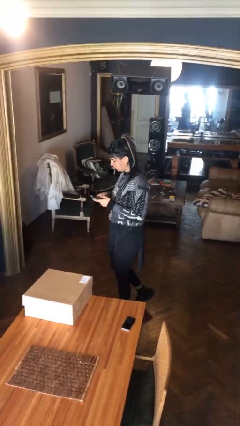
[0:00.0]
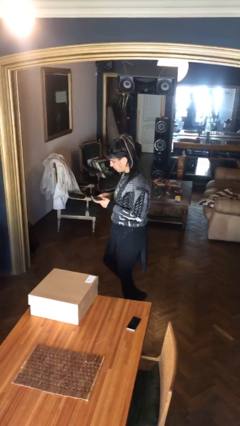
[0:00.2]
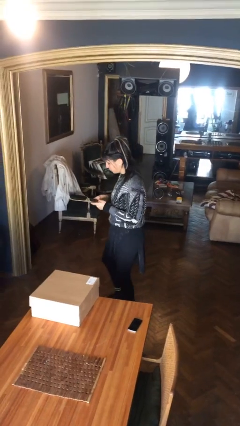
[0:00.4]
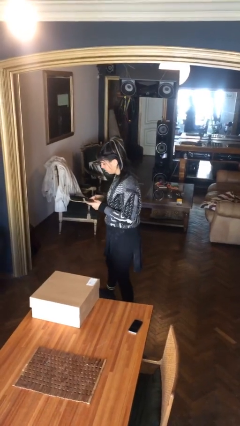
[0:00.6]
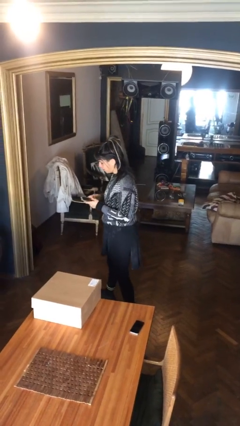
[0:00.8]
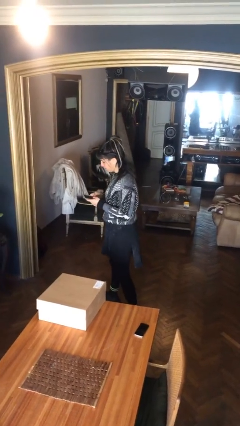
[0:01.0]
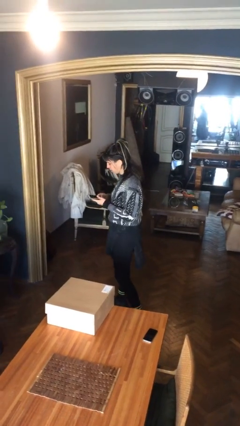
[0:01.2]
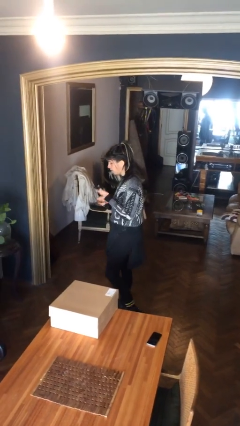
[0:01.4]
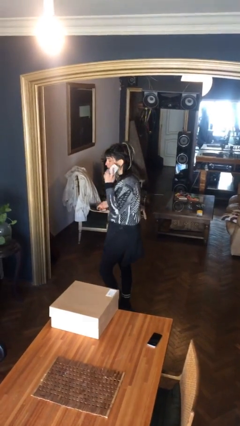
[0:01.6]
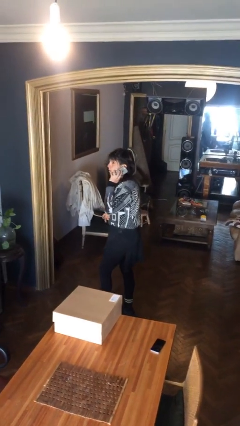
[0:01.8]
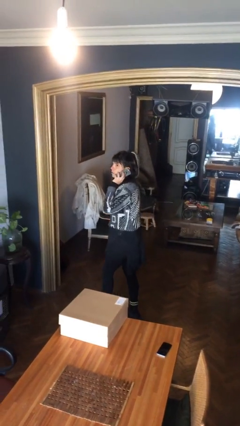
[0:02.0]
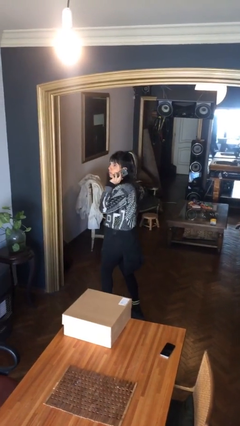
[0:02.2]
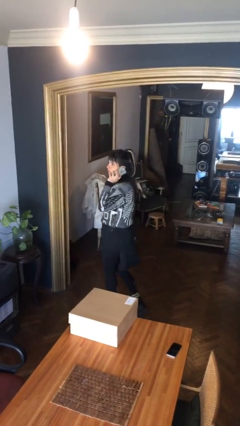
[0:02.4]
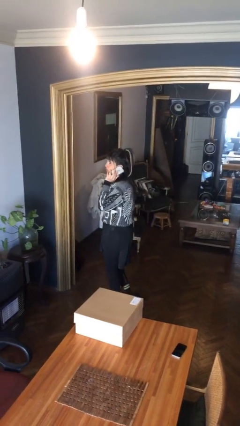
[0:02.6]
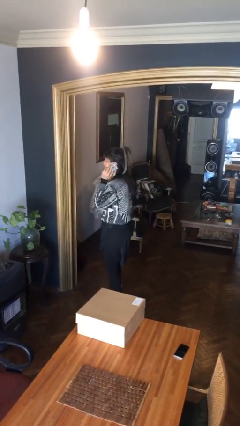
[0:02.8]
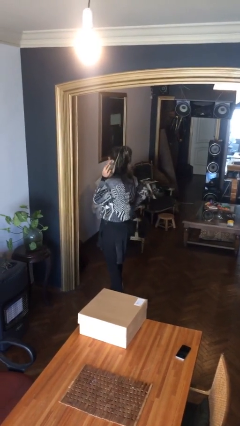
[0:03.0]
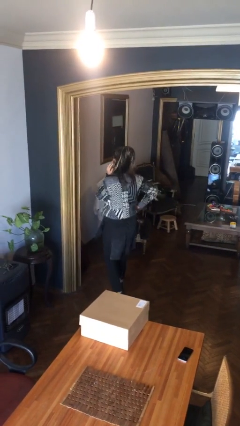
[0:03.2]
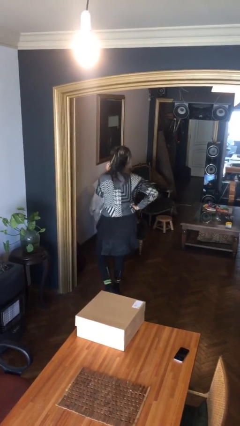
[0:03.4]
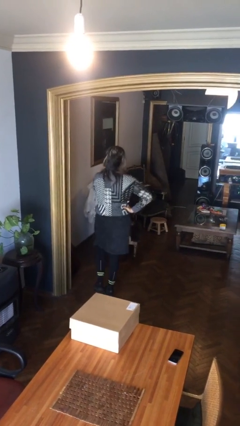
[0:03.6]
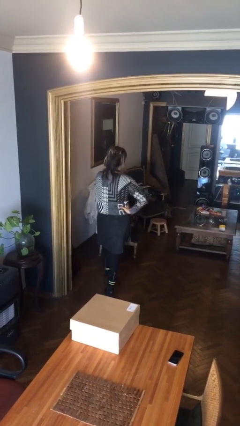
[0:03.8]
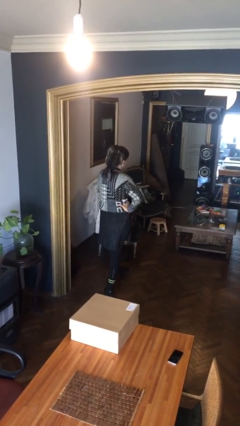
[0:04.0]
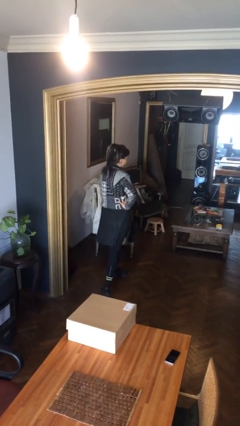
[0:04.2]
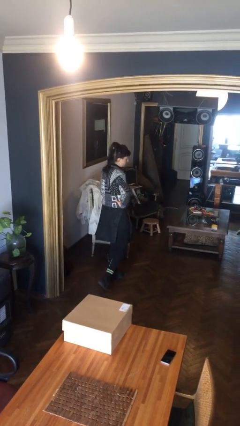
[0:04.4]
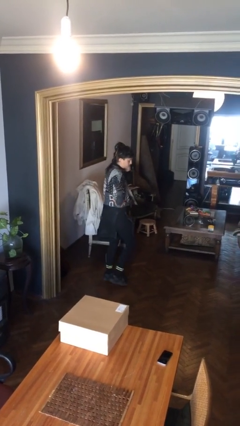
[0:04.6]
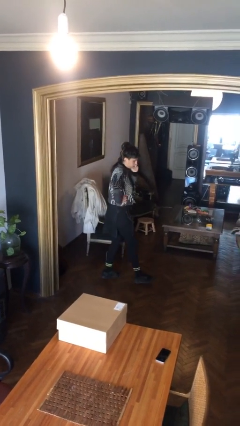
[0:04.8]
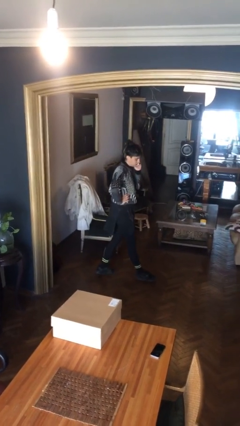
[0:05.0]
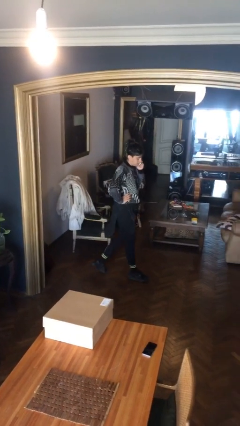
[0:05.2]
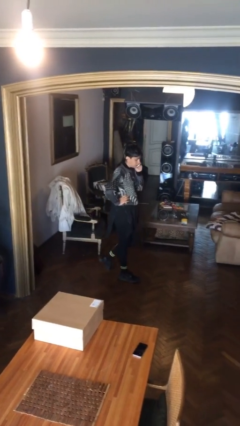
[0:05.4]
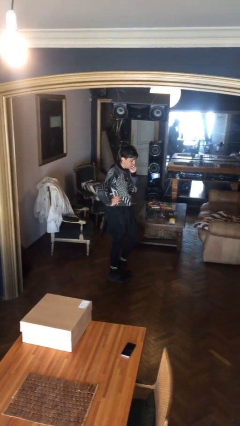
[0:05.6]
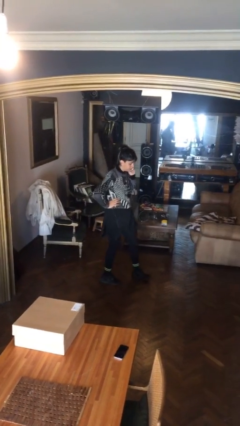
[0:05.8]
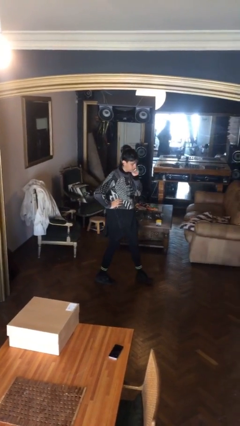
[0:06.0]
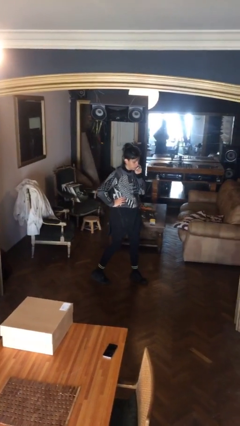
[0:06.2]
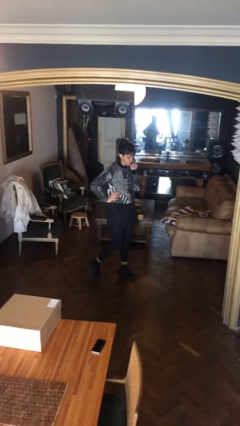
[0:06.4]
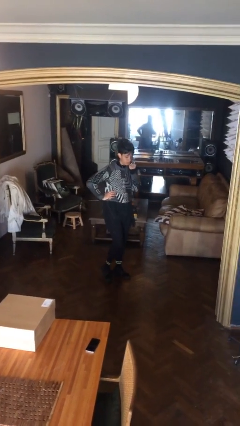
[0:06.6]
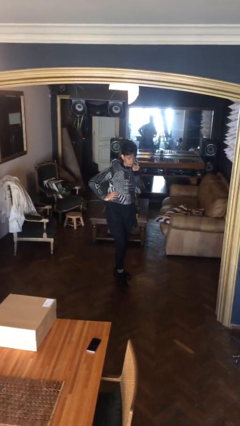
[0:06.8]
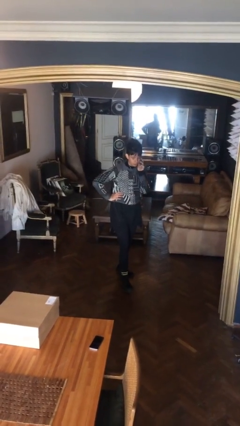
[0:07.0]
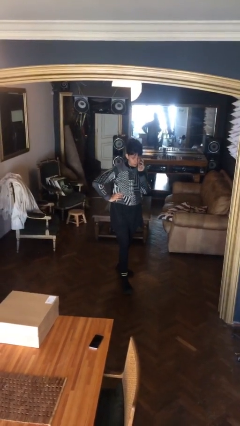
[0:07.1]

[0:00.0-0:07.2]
person talks on phone

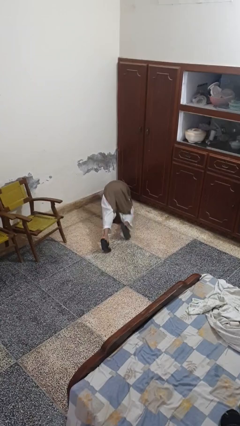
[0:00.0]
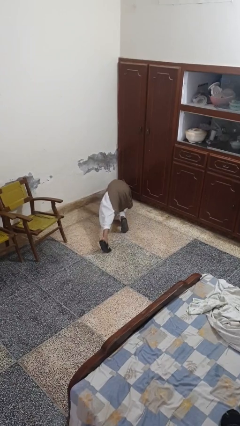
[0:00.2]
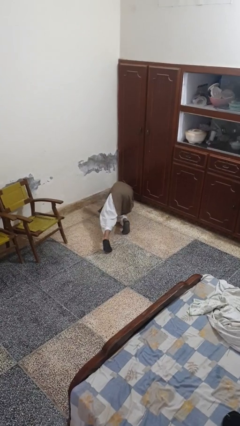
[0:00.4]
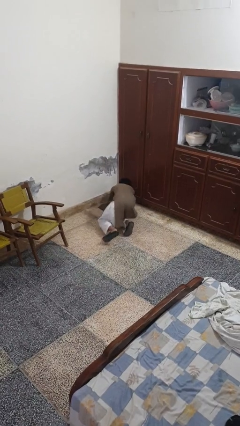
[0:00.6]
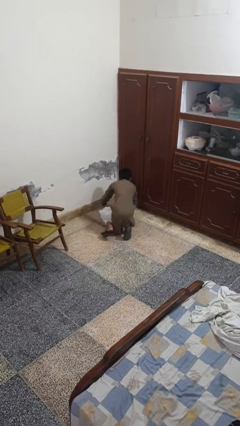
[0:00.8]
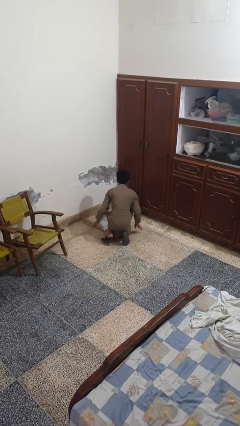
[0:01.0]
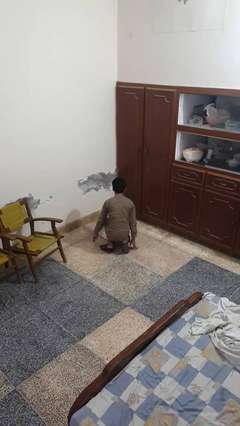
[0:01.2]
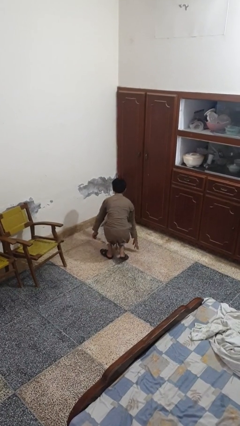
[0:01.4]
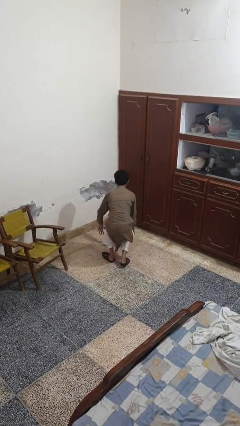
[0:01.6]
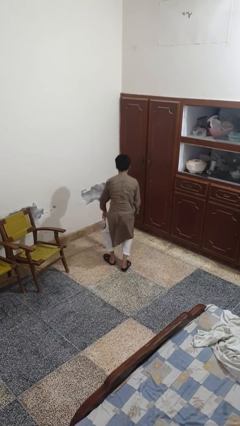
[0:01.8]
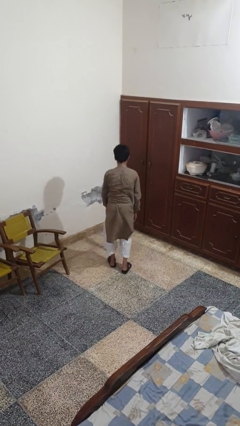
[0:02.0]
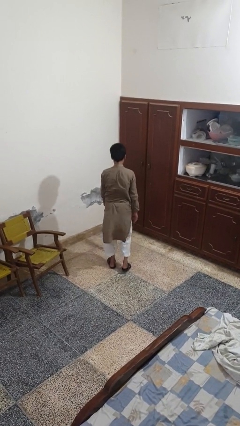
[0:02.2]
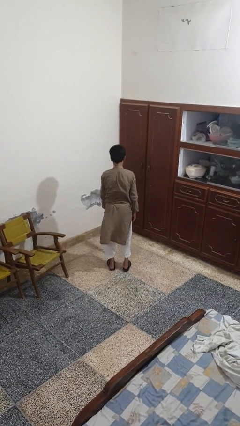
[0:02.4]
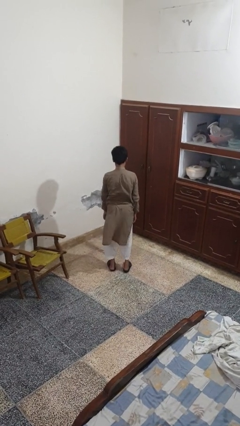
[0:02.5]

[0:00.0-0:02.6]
person stands up from floor

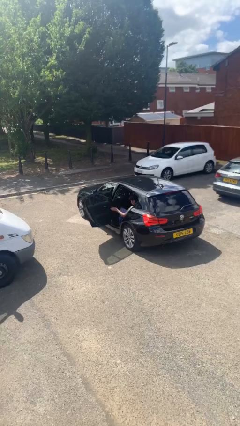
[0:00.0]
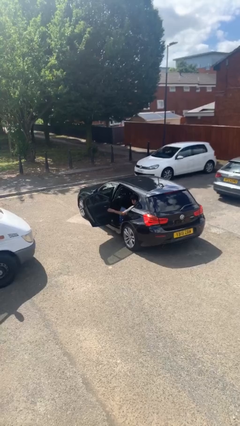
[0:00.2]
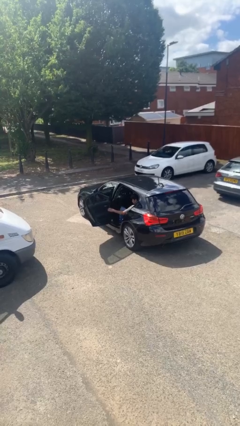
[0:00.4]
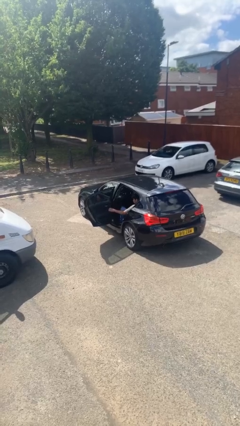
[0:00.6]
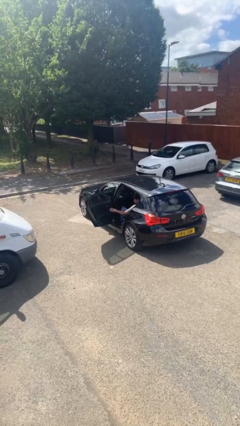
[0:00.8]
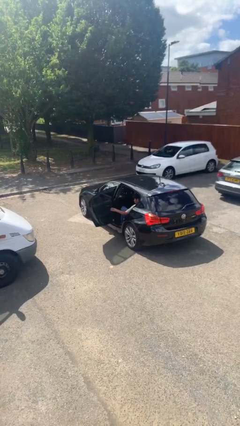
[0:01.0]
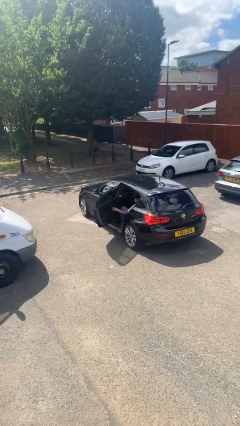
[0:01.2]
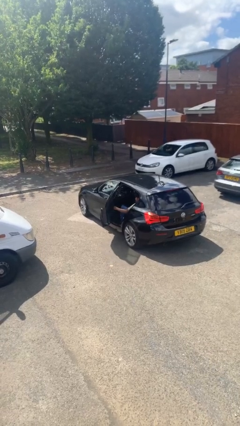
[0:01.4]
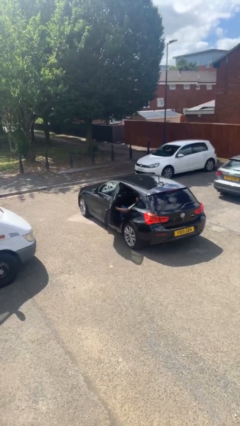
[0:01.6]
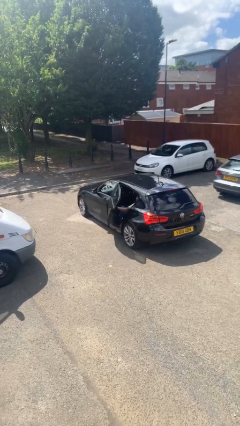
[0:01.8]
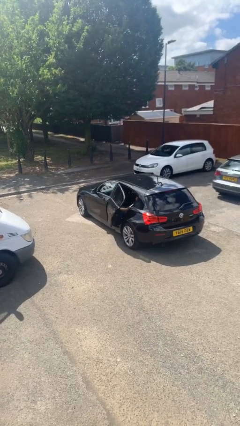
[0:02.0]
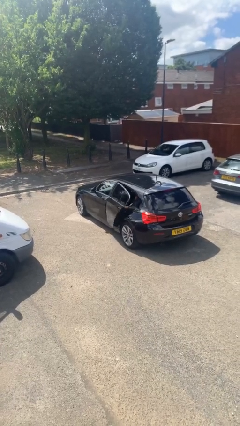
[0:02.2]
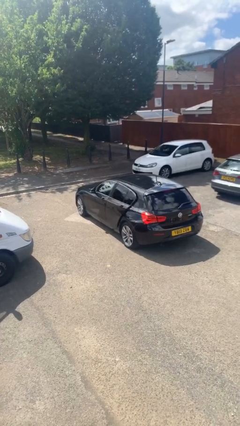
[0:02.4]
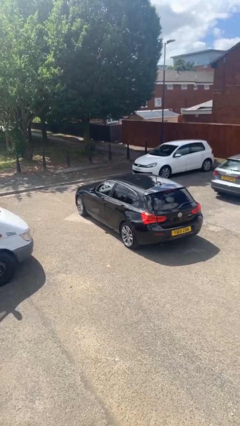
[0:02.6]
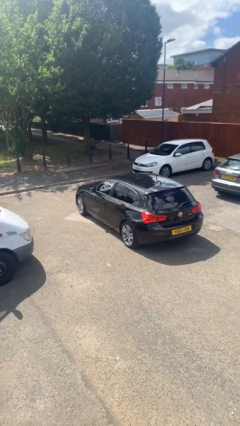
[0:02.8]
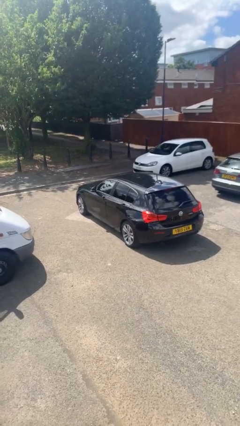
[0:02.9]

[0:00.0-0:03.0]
person closes car door

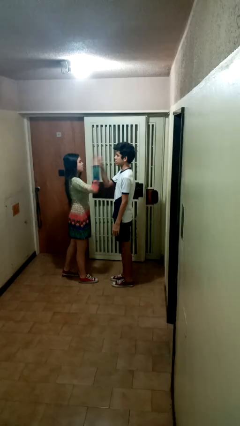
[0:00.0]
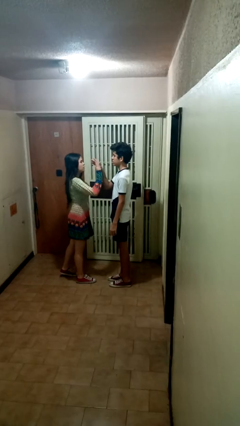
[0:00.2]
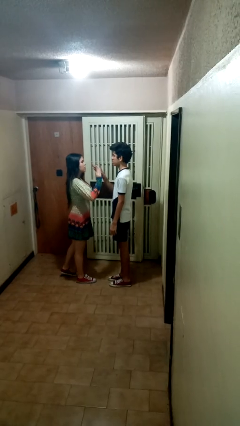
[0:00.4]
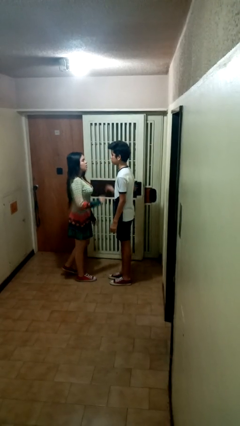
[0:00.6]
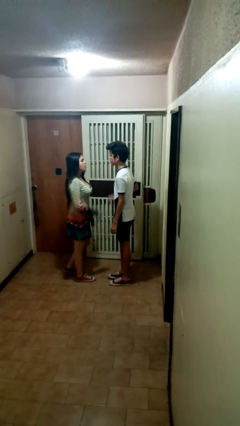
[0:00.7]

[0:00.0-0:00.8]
person highfives hand

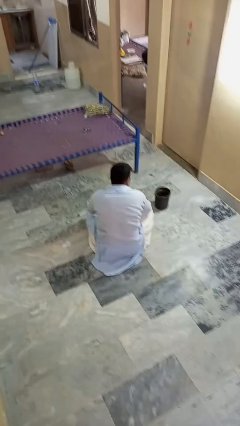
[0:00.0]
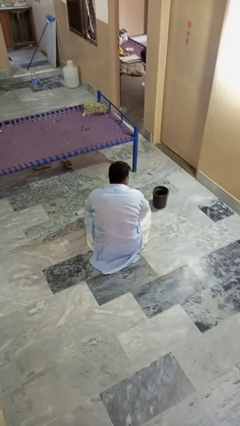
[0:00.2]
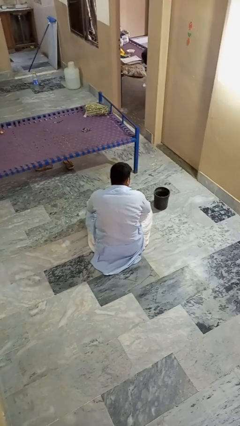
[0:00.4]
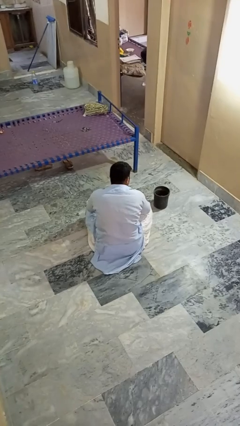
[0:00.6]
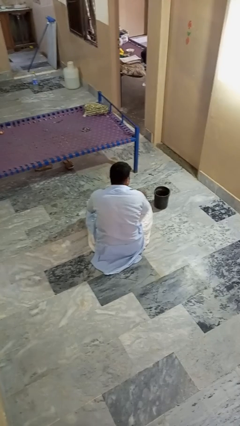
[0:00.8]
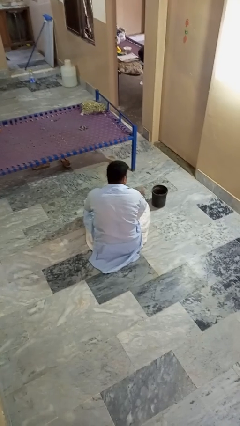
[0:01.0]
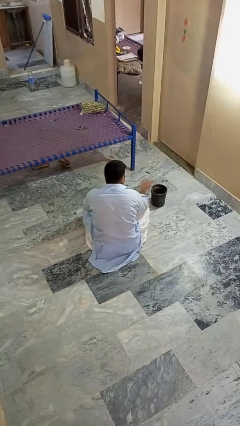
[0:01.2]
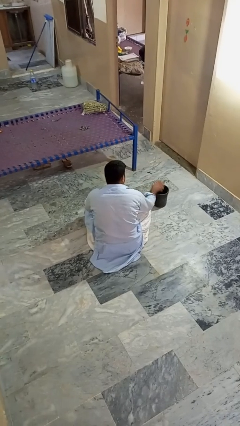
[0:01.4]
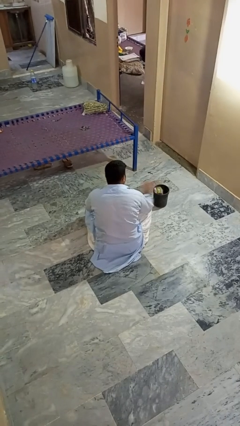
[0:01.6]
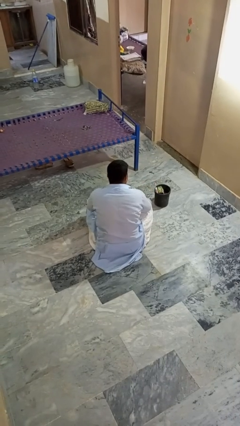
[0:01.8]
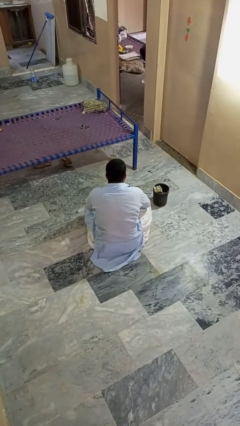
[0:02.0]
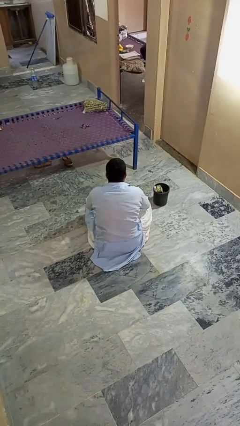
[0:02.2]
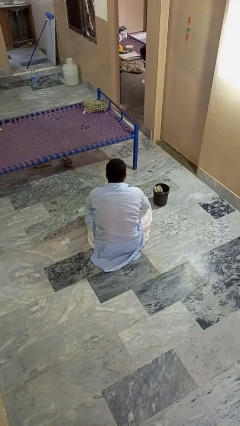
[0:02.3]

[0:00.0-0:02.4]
person puts object into basket

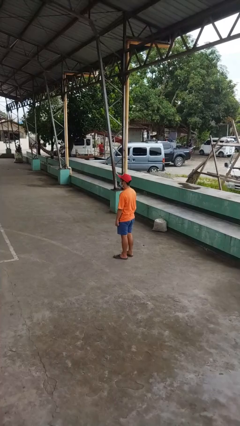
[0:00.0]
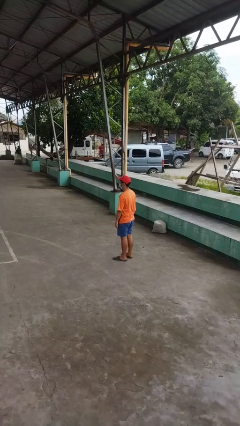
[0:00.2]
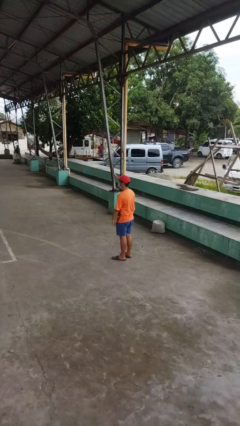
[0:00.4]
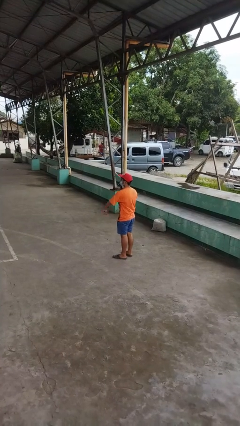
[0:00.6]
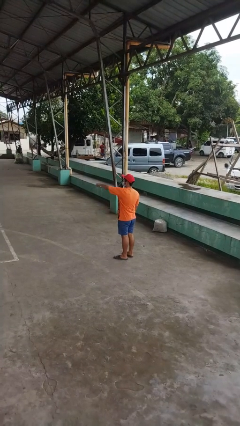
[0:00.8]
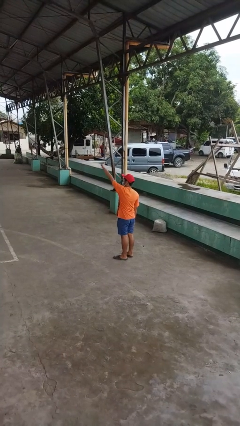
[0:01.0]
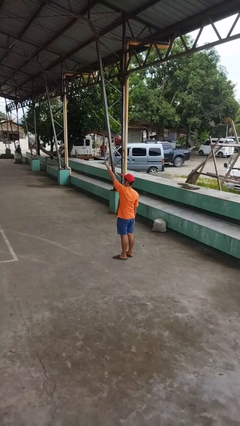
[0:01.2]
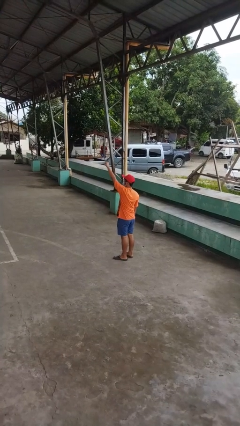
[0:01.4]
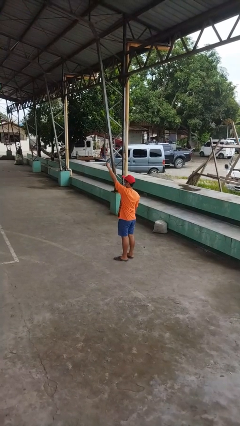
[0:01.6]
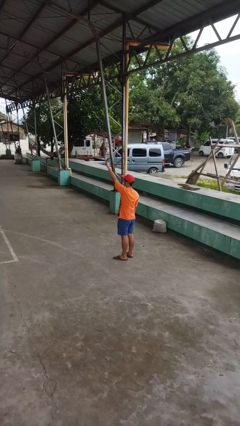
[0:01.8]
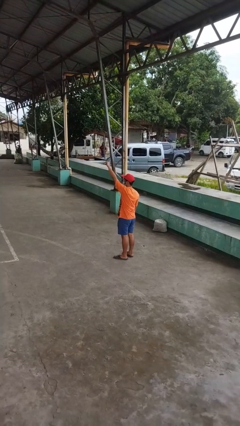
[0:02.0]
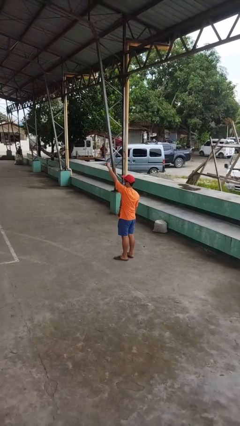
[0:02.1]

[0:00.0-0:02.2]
person gestures swipe up
